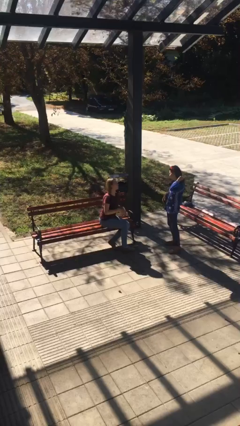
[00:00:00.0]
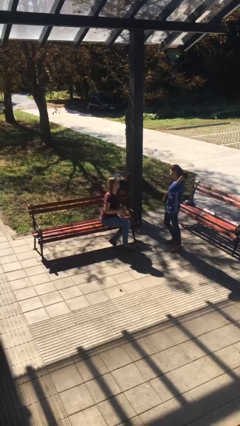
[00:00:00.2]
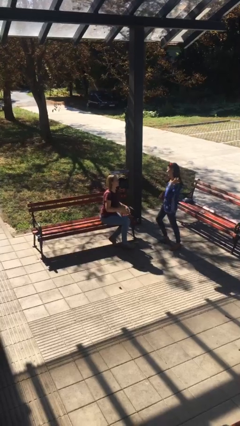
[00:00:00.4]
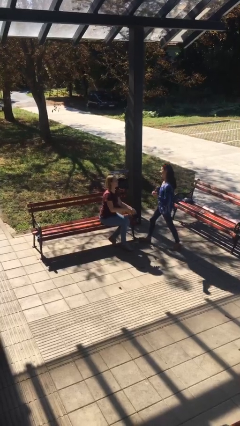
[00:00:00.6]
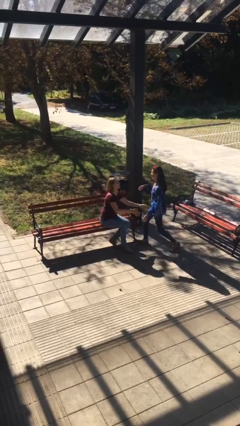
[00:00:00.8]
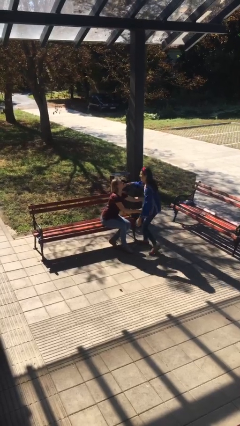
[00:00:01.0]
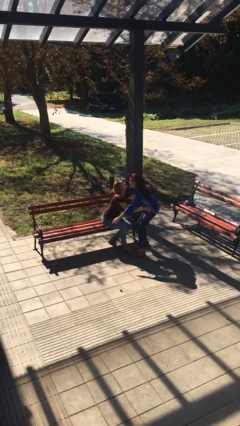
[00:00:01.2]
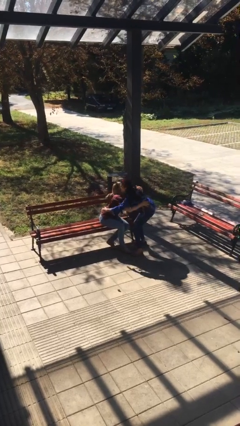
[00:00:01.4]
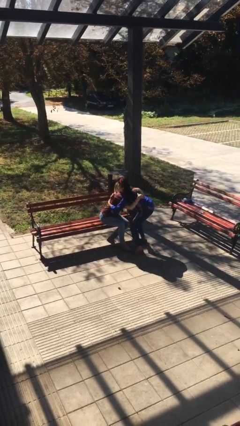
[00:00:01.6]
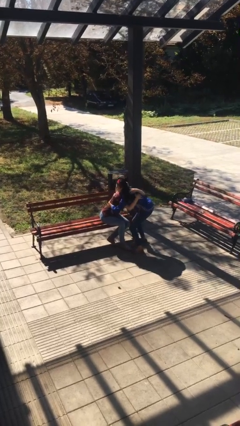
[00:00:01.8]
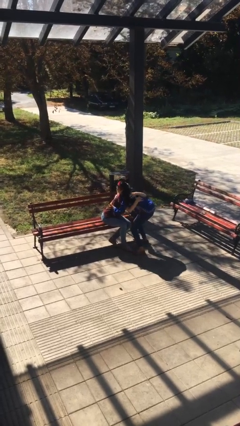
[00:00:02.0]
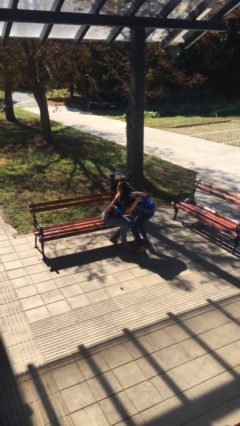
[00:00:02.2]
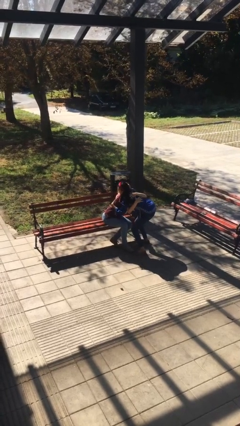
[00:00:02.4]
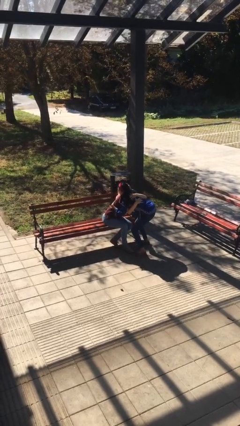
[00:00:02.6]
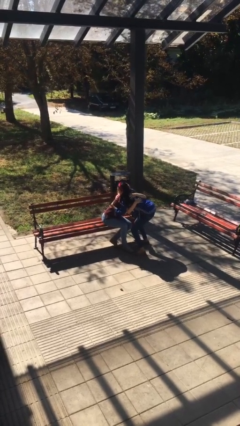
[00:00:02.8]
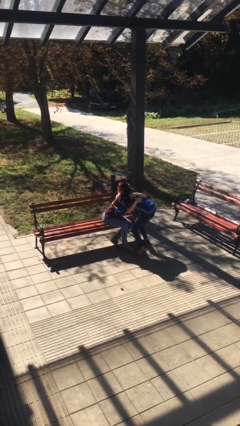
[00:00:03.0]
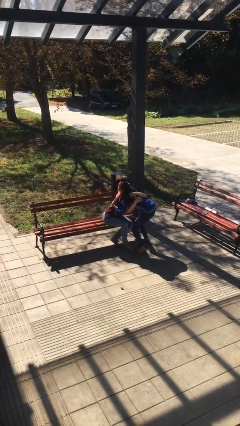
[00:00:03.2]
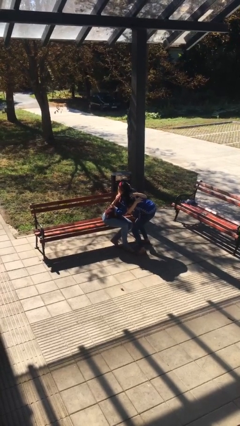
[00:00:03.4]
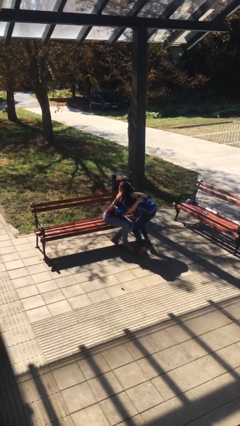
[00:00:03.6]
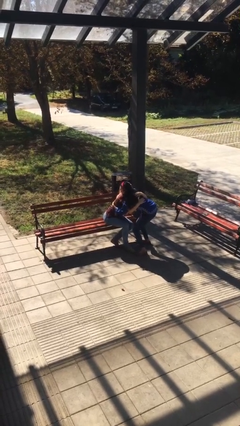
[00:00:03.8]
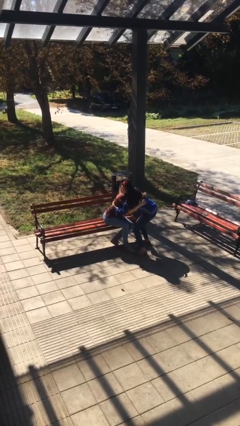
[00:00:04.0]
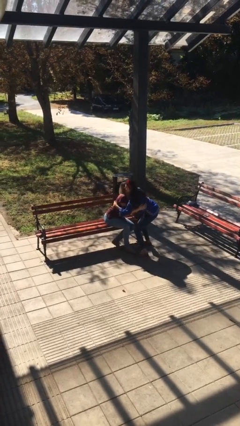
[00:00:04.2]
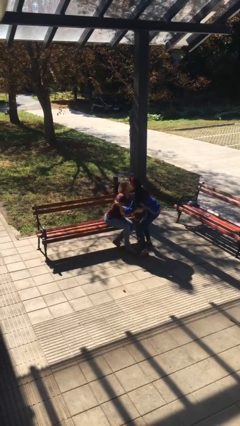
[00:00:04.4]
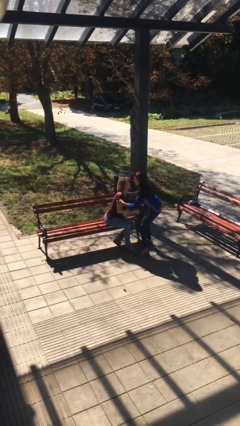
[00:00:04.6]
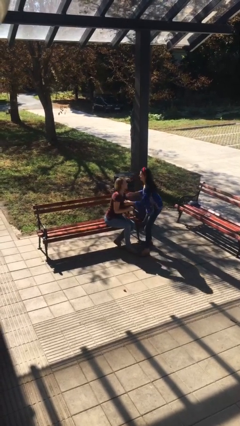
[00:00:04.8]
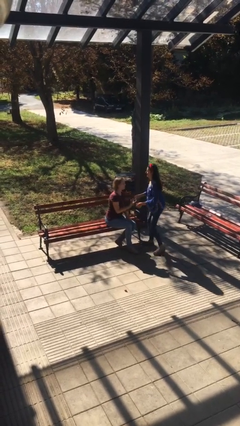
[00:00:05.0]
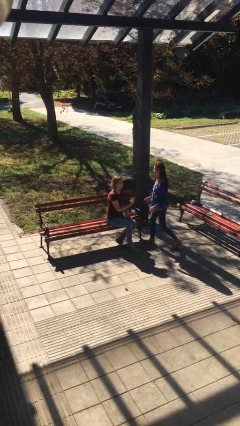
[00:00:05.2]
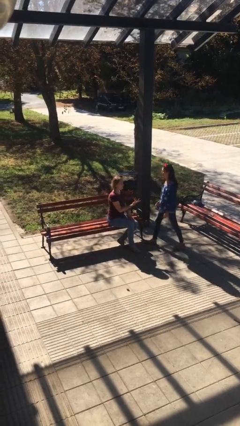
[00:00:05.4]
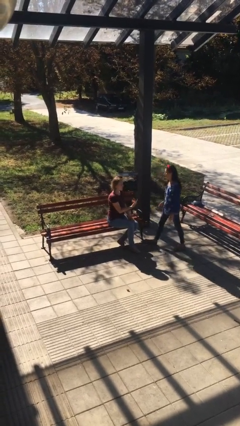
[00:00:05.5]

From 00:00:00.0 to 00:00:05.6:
person embraces person

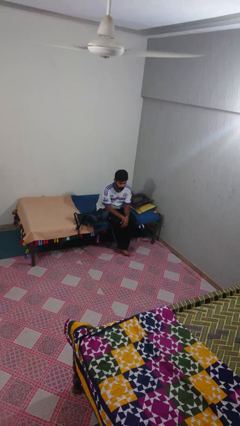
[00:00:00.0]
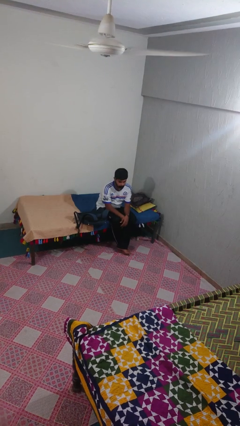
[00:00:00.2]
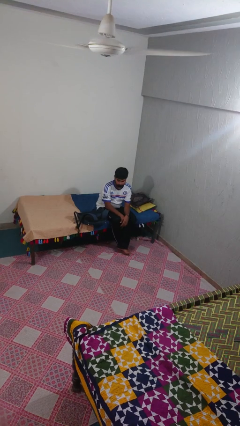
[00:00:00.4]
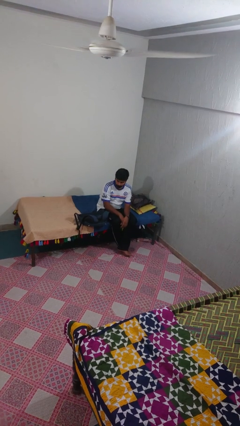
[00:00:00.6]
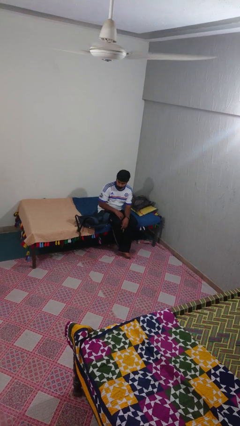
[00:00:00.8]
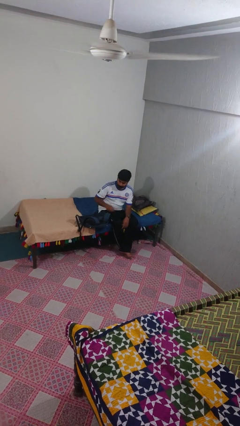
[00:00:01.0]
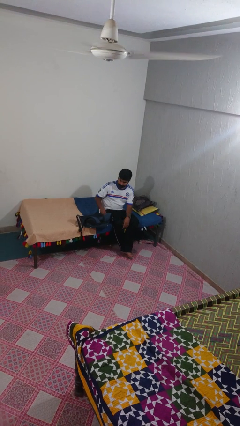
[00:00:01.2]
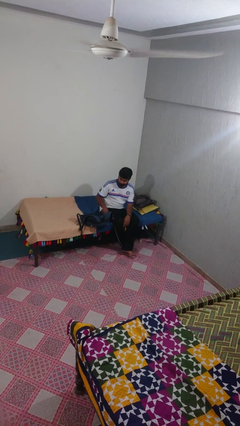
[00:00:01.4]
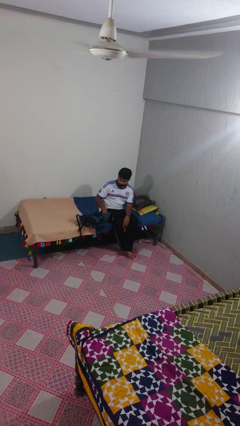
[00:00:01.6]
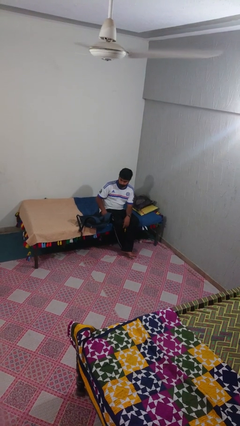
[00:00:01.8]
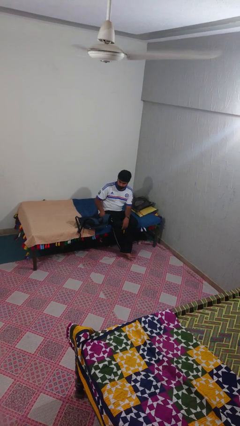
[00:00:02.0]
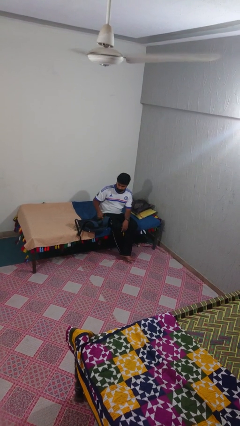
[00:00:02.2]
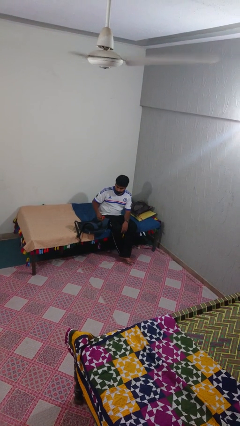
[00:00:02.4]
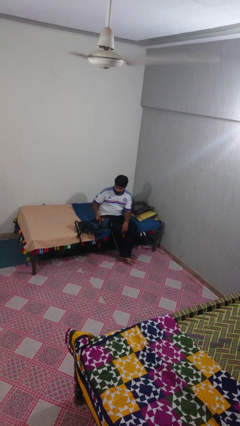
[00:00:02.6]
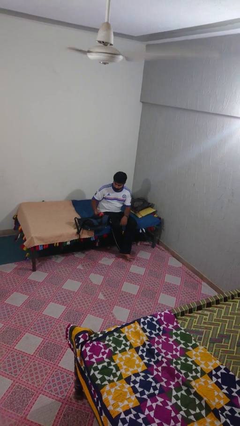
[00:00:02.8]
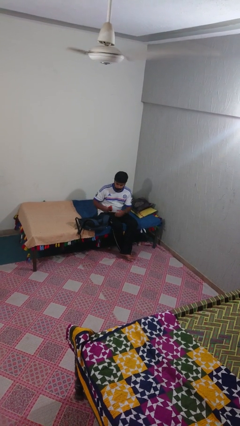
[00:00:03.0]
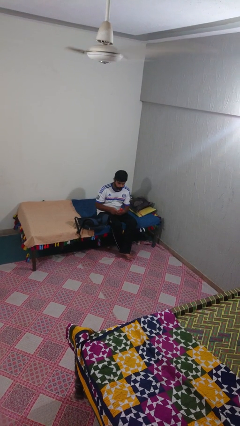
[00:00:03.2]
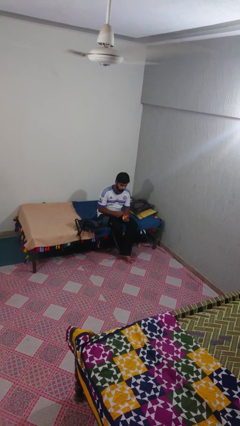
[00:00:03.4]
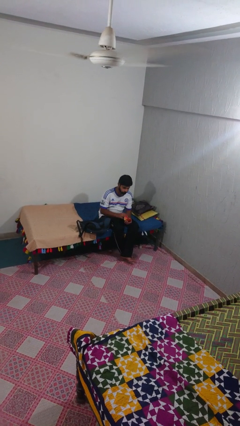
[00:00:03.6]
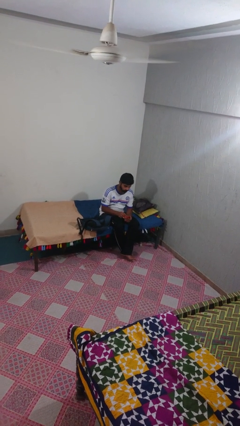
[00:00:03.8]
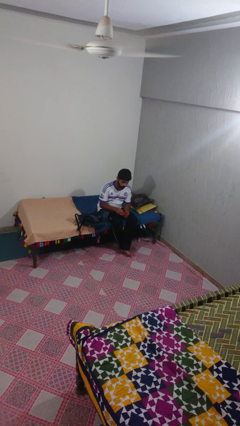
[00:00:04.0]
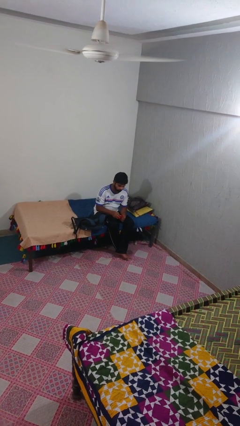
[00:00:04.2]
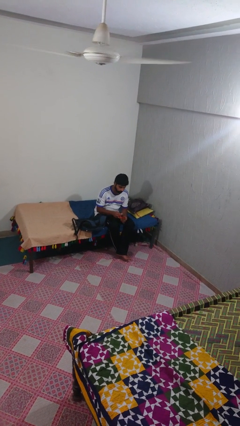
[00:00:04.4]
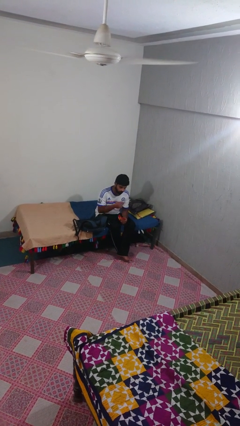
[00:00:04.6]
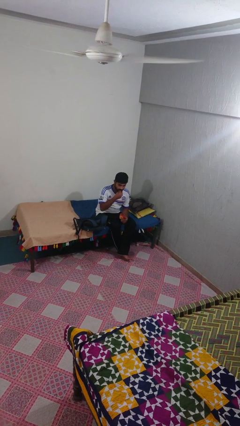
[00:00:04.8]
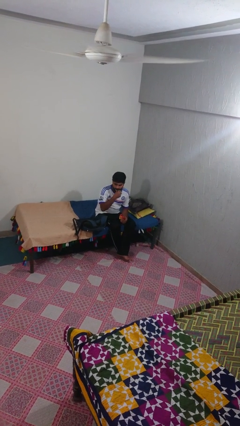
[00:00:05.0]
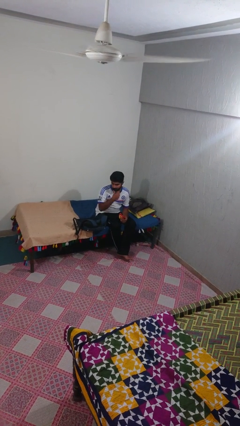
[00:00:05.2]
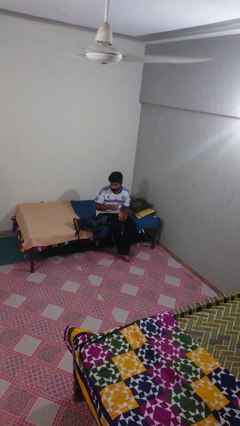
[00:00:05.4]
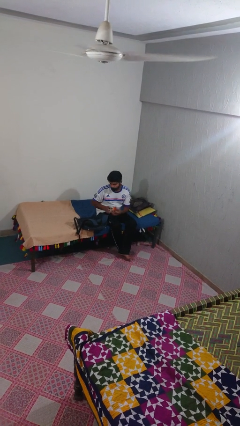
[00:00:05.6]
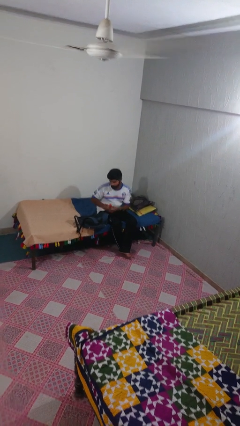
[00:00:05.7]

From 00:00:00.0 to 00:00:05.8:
person eats snack from bag

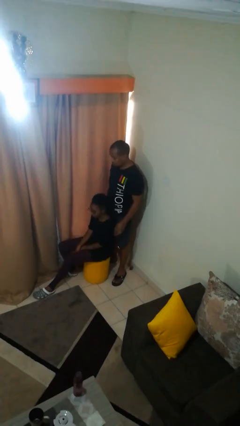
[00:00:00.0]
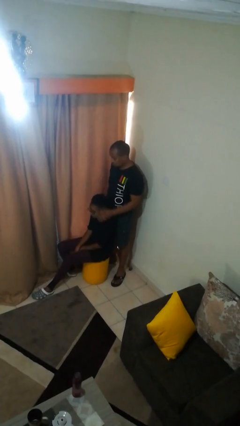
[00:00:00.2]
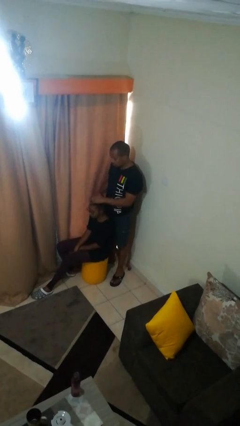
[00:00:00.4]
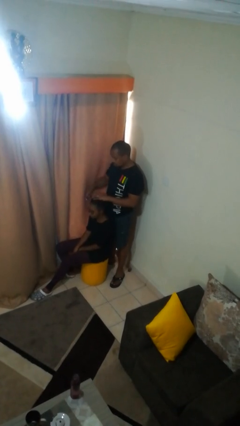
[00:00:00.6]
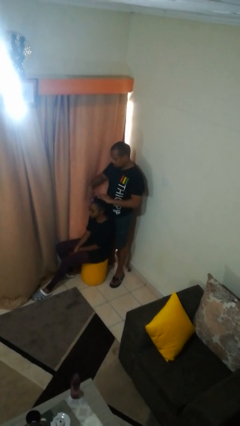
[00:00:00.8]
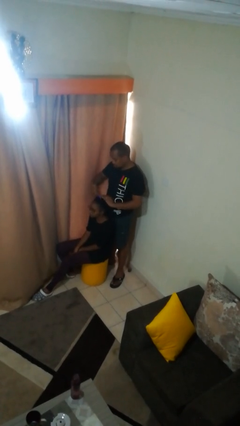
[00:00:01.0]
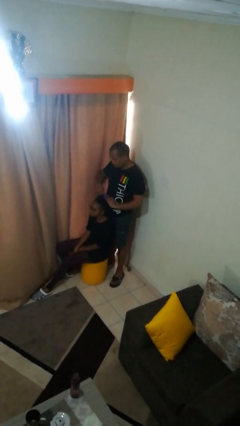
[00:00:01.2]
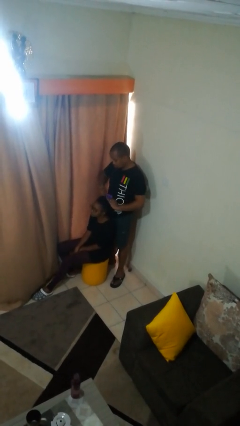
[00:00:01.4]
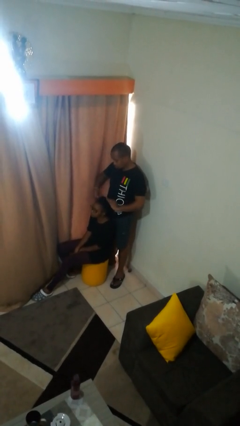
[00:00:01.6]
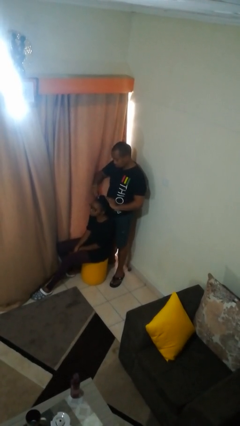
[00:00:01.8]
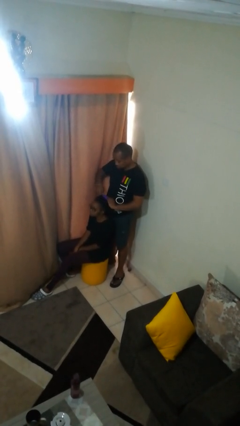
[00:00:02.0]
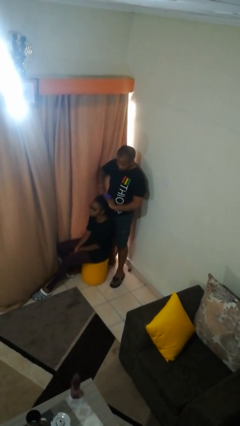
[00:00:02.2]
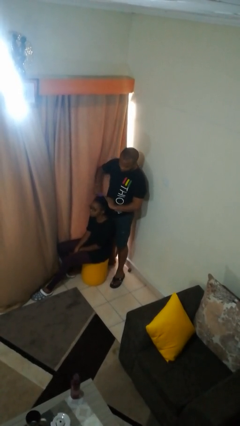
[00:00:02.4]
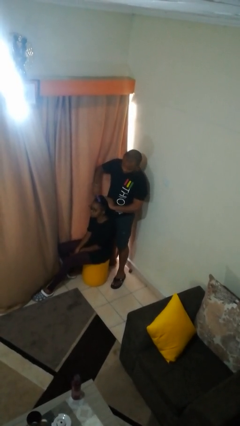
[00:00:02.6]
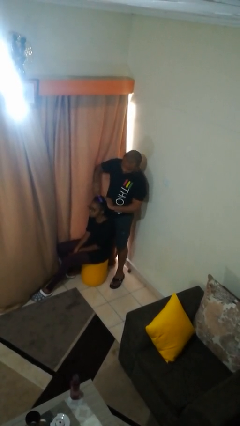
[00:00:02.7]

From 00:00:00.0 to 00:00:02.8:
person brushes hair of person

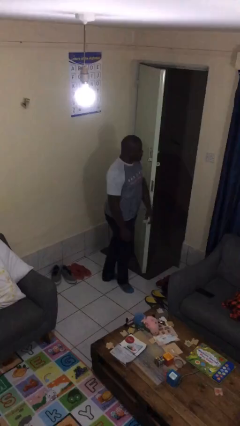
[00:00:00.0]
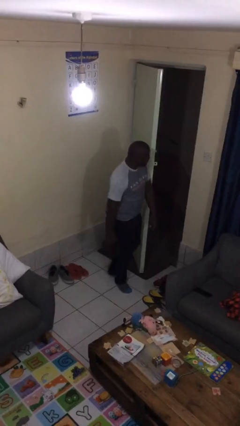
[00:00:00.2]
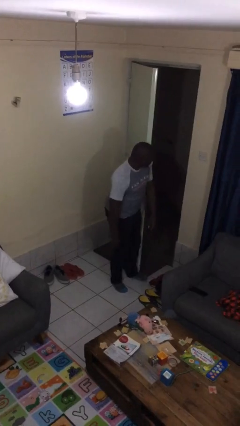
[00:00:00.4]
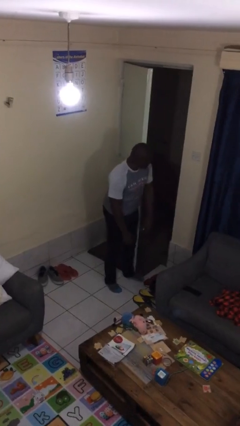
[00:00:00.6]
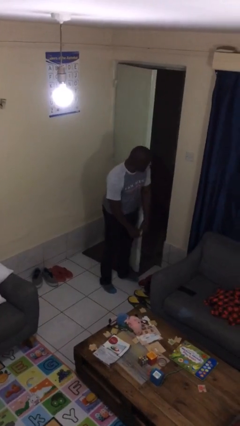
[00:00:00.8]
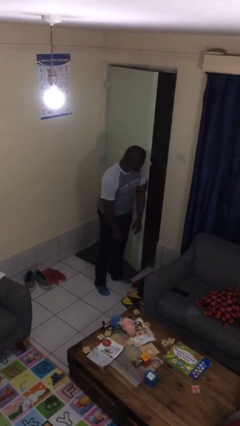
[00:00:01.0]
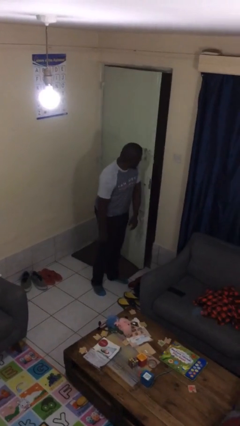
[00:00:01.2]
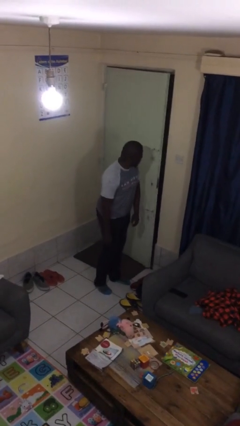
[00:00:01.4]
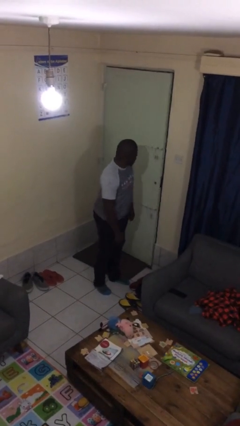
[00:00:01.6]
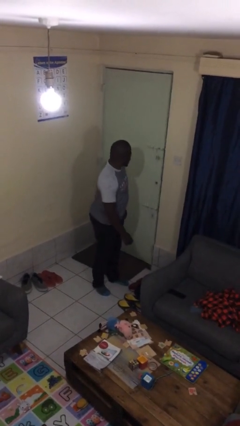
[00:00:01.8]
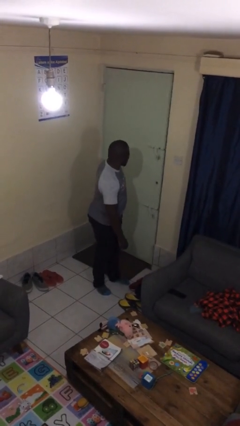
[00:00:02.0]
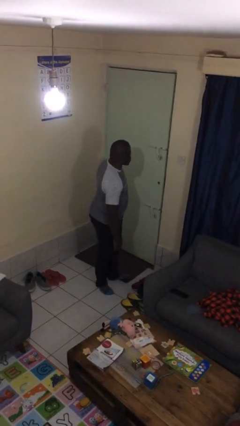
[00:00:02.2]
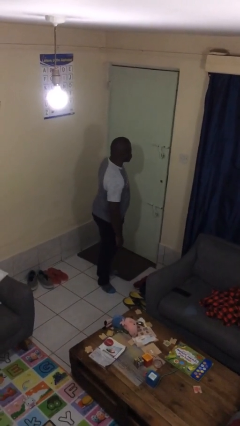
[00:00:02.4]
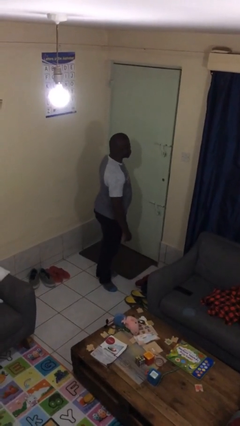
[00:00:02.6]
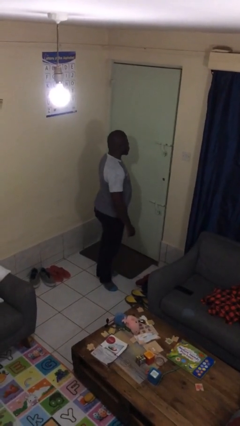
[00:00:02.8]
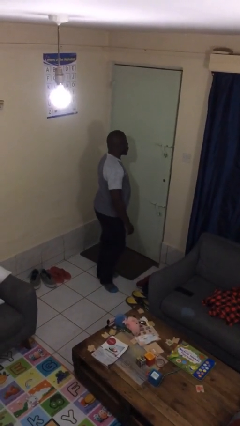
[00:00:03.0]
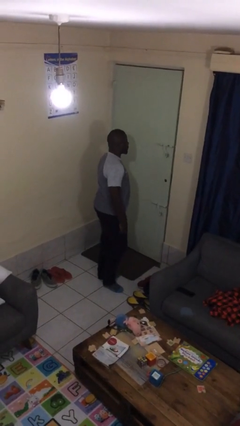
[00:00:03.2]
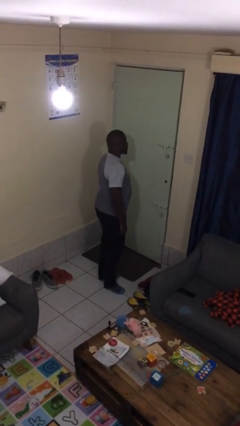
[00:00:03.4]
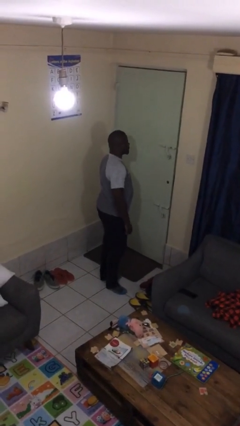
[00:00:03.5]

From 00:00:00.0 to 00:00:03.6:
person closes door with hip
